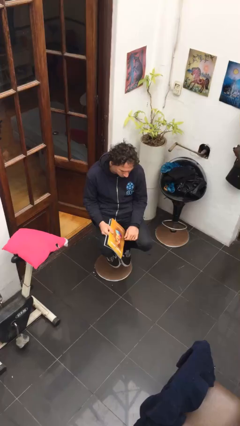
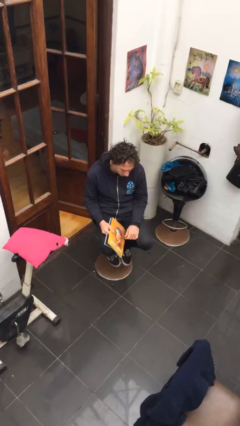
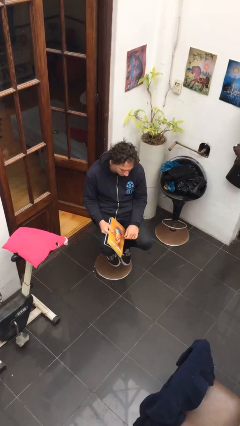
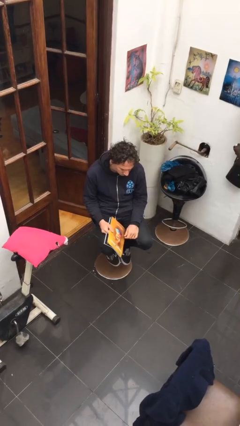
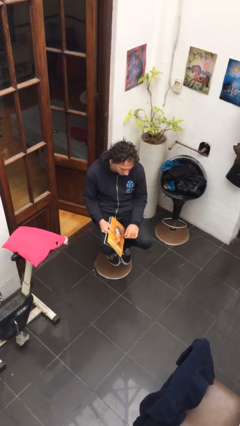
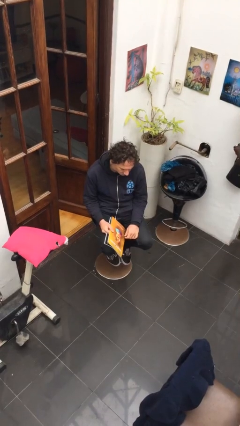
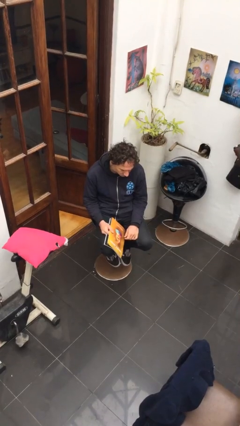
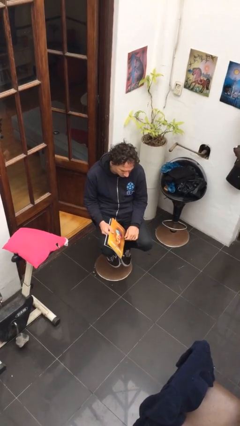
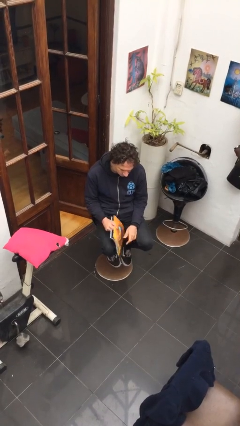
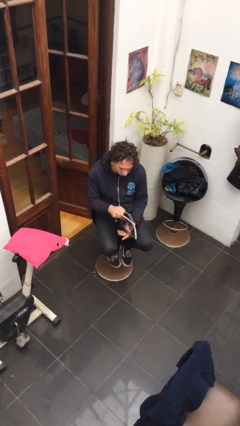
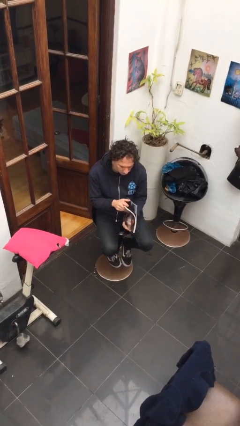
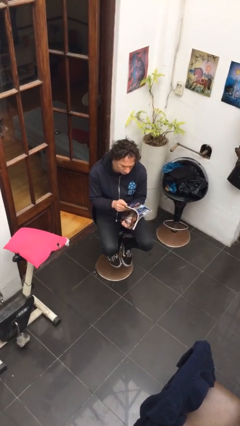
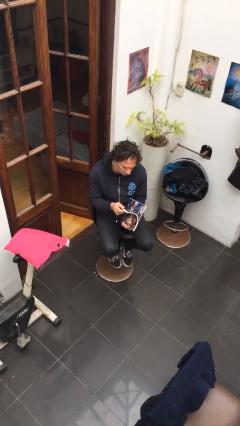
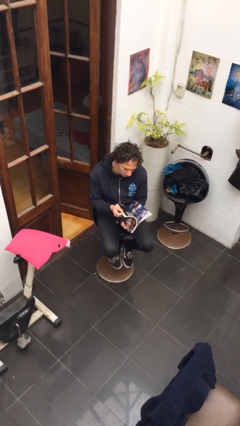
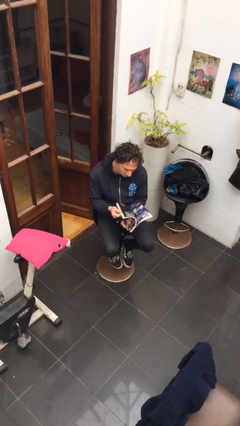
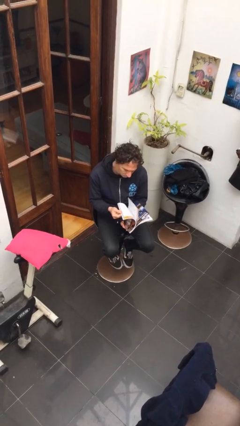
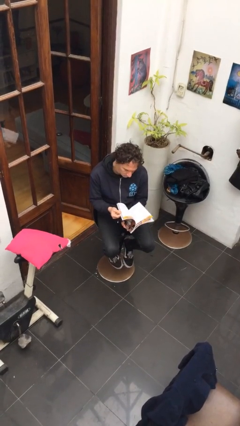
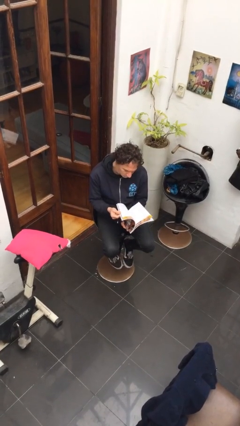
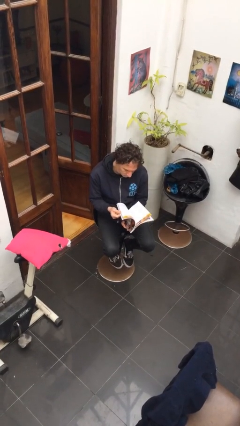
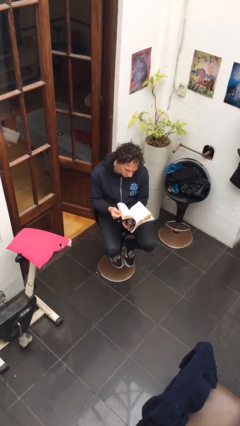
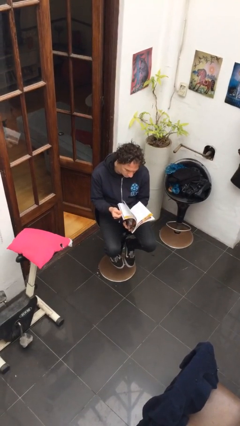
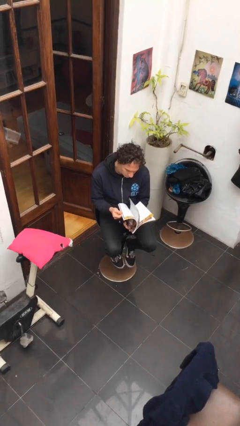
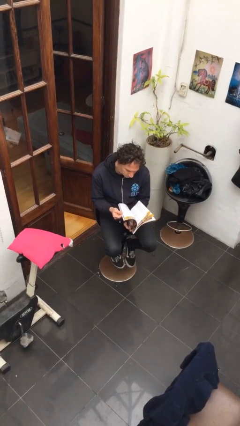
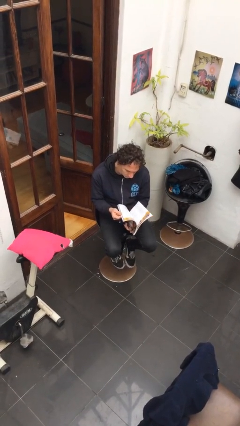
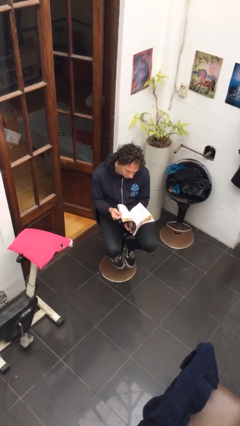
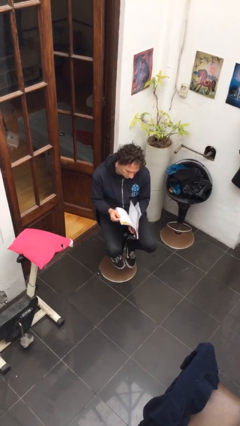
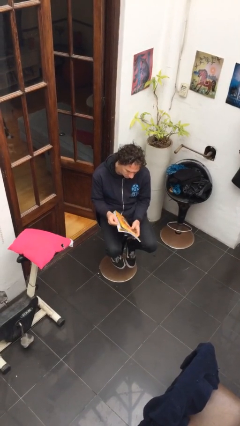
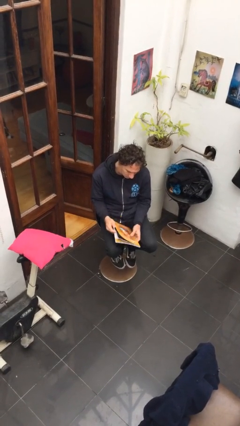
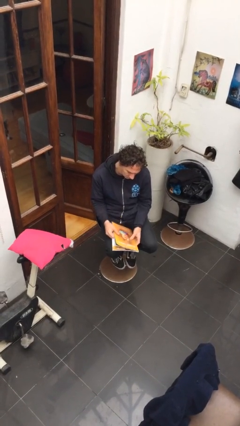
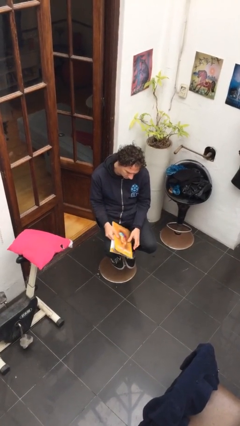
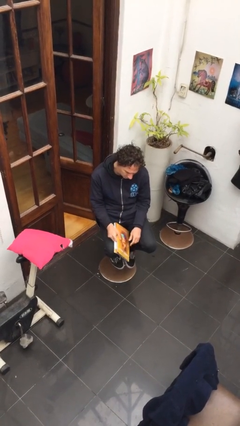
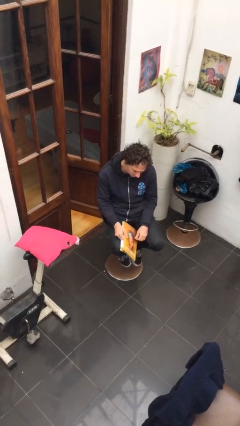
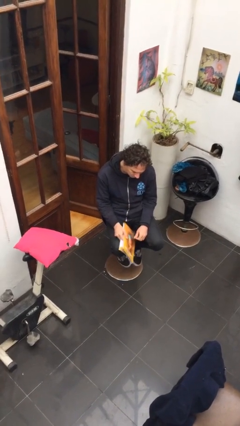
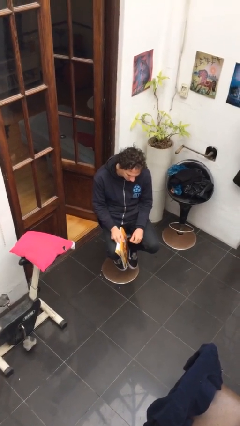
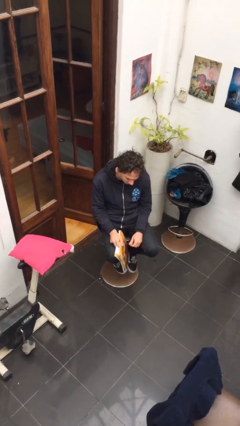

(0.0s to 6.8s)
person reads magazine

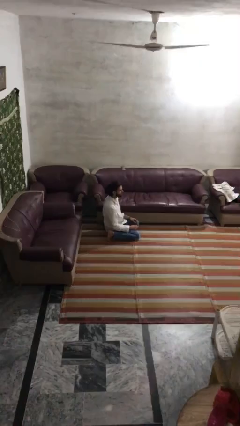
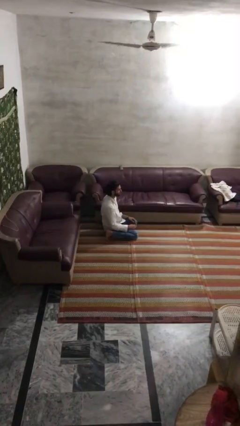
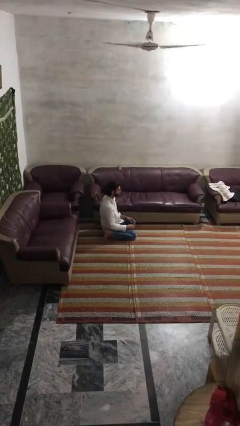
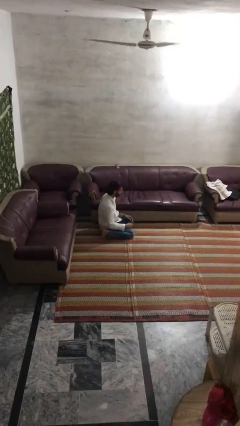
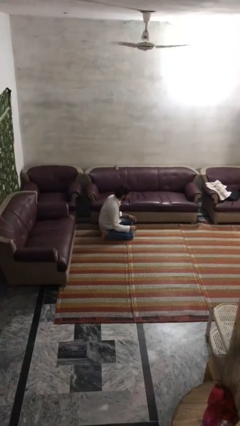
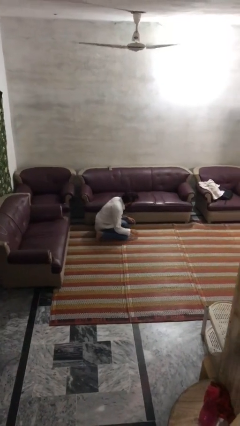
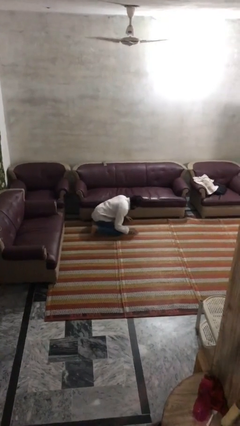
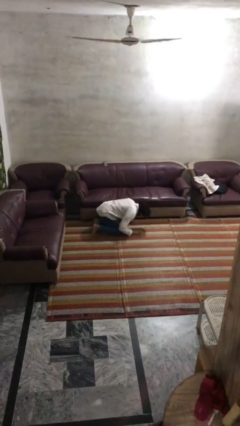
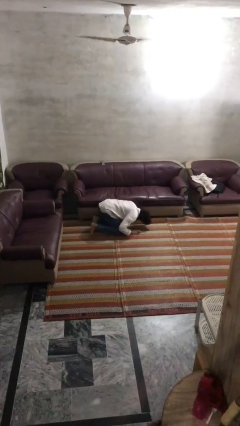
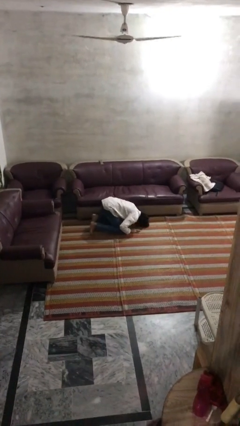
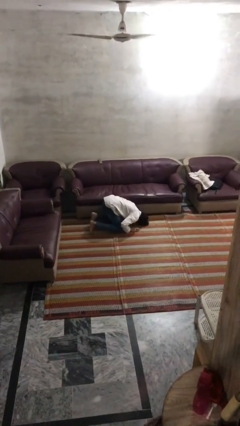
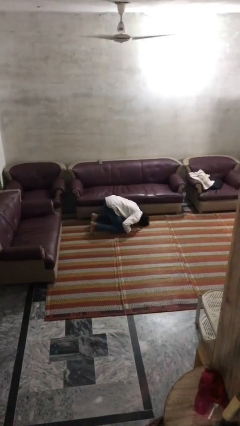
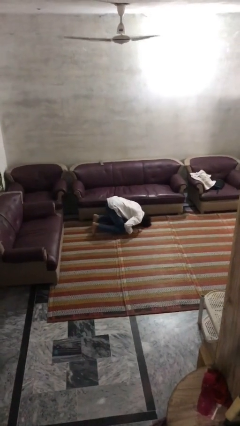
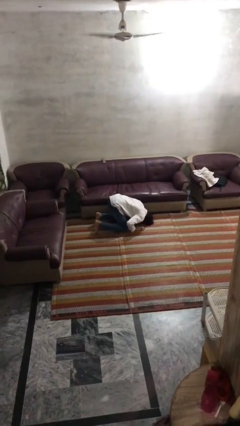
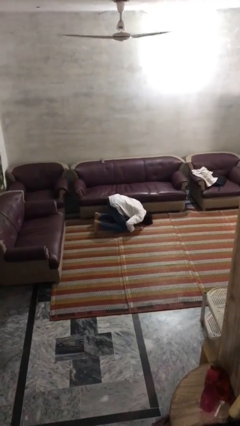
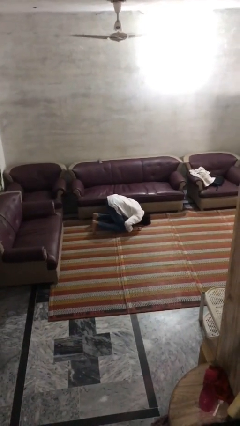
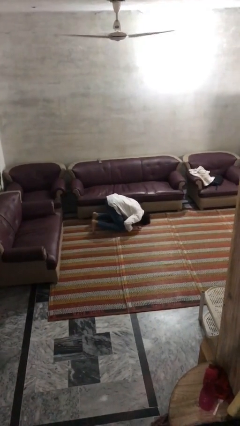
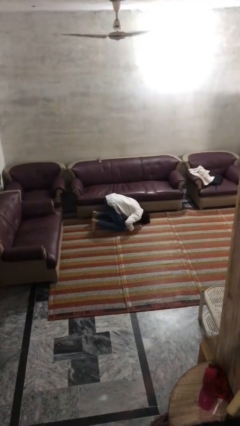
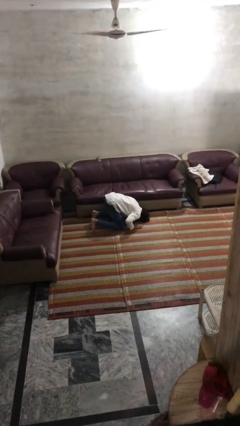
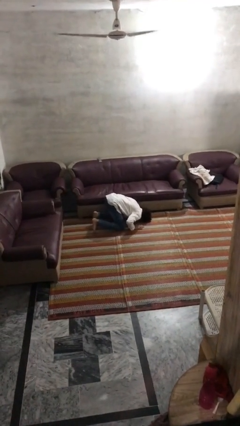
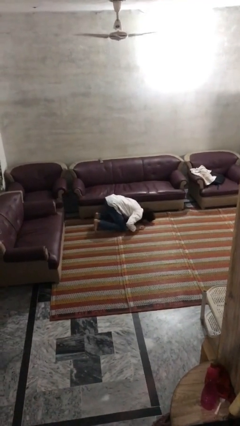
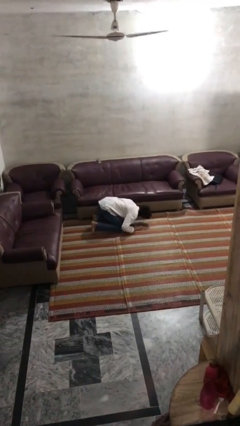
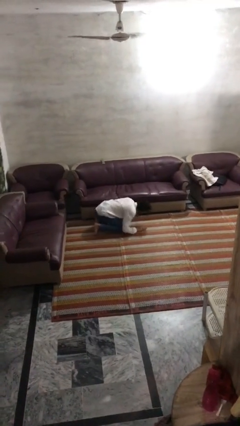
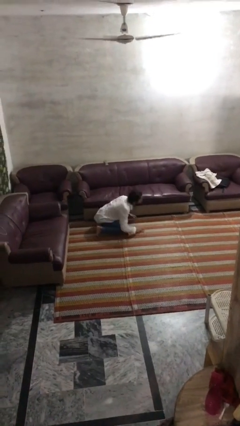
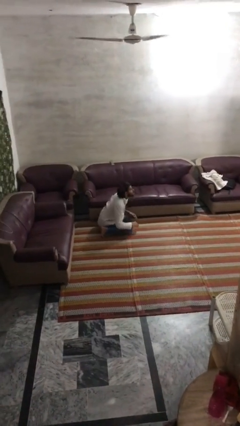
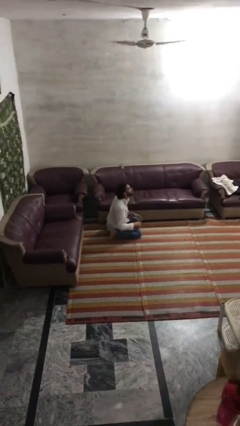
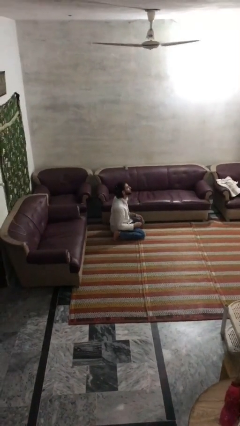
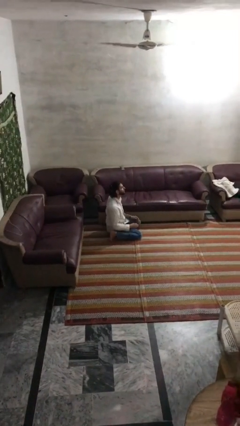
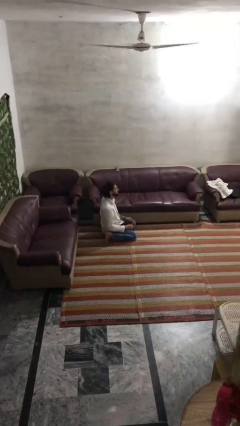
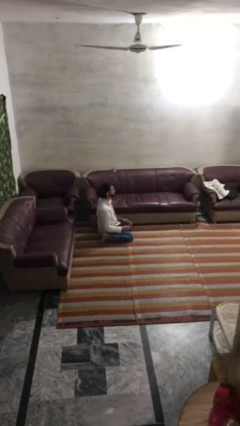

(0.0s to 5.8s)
person searches under couch

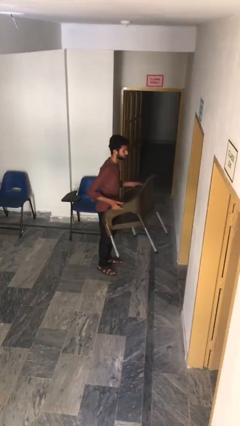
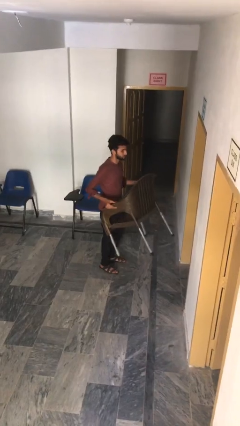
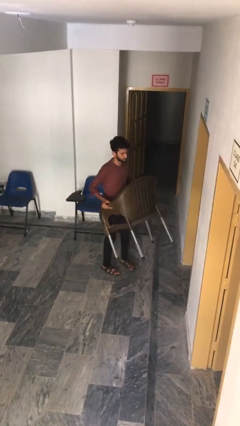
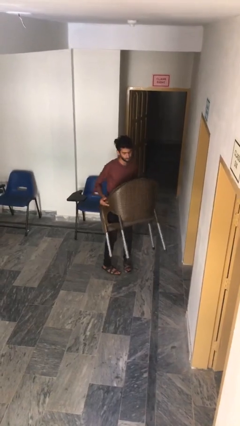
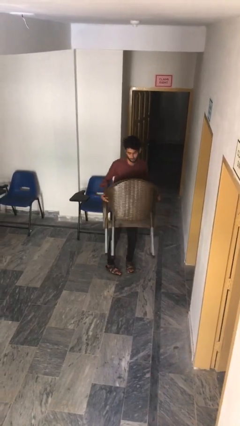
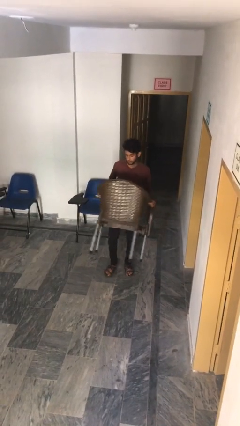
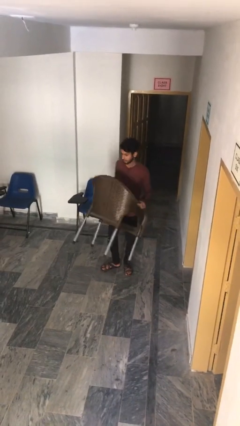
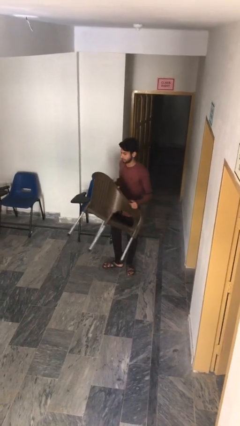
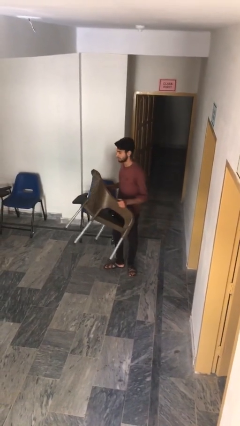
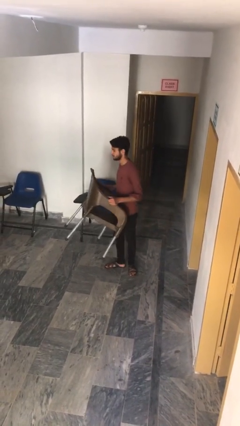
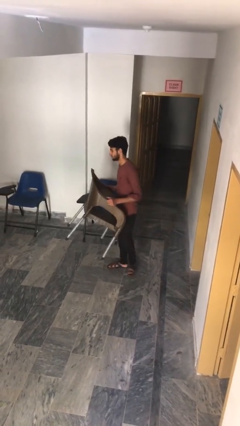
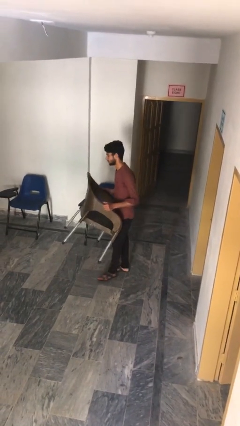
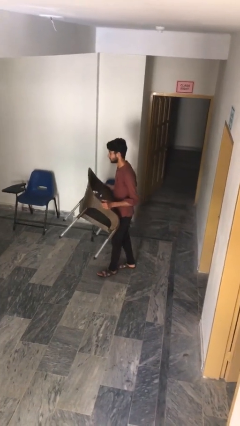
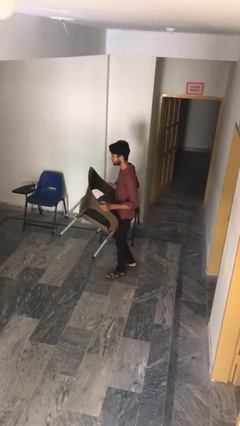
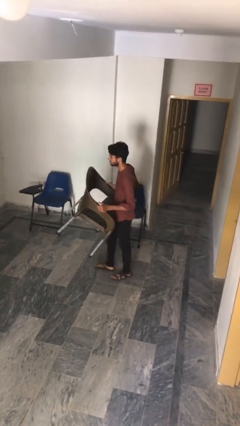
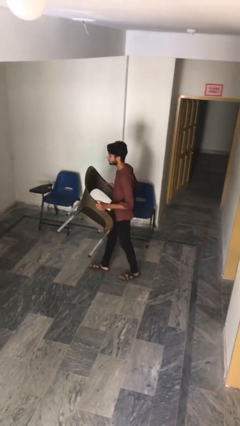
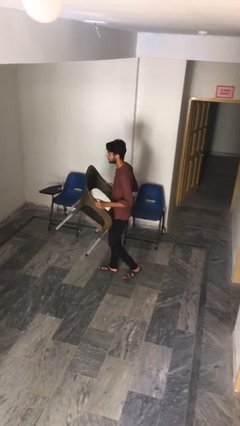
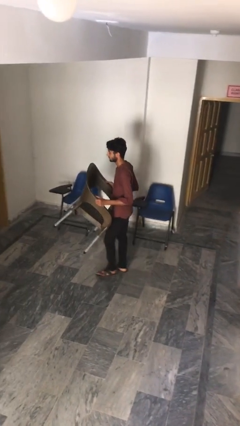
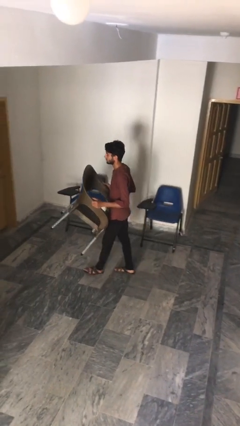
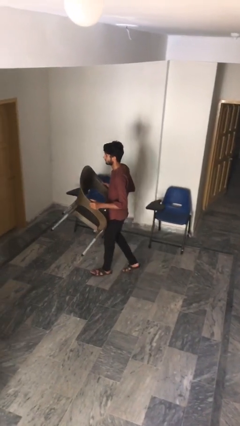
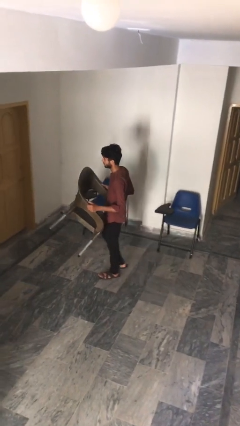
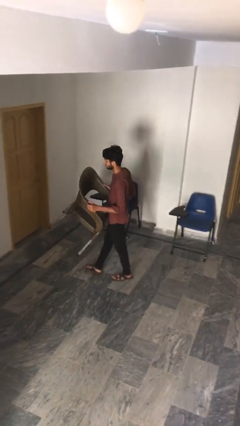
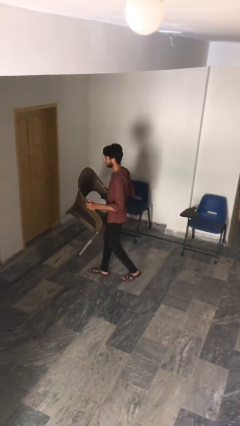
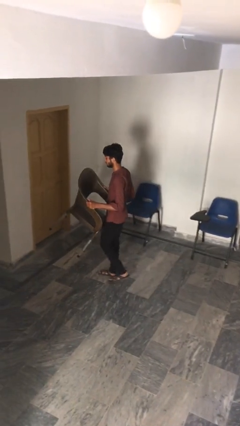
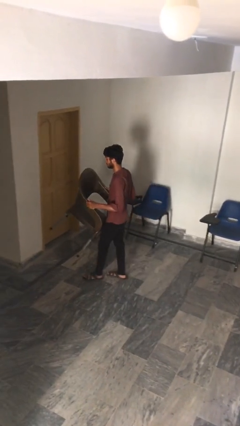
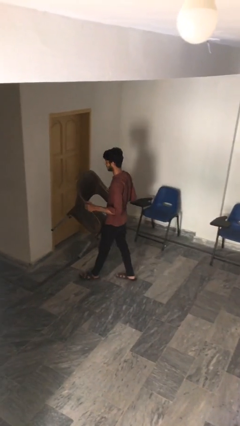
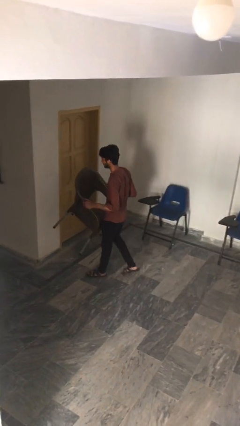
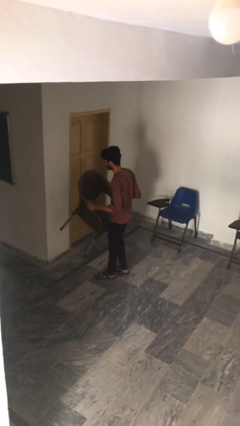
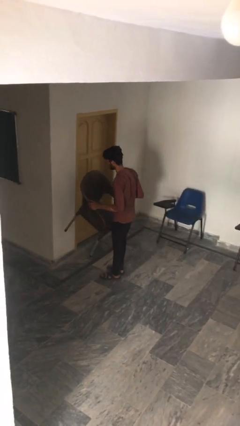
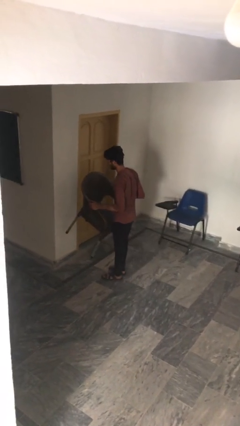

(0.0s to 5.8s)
person carries heavy object
